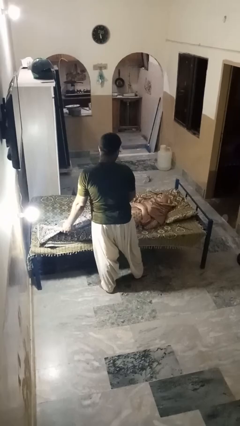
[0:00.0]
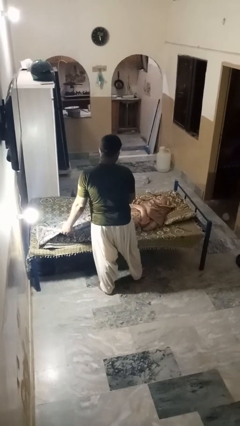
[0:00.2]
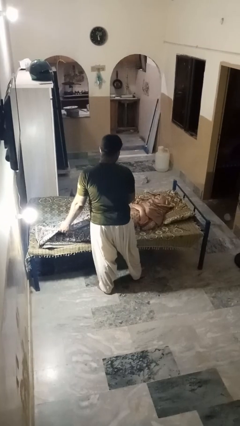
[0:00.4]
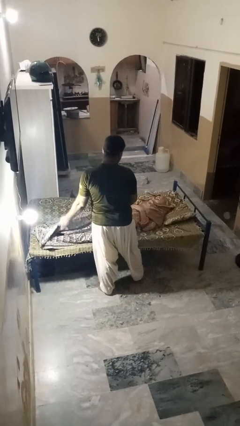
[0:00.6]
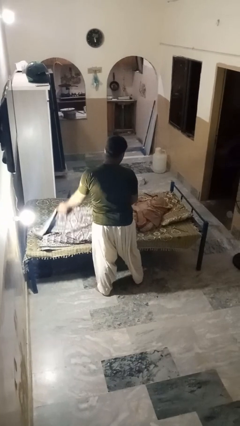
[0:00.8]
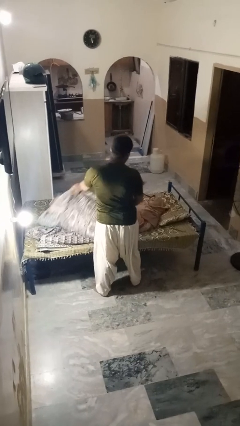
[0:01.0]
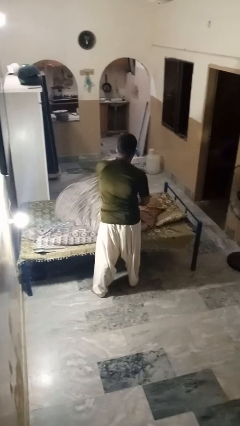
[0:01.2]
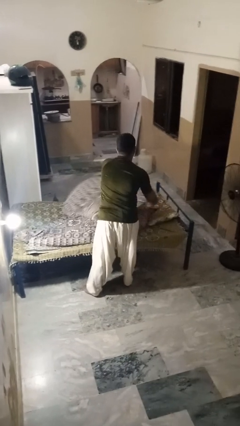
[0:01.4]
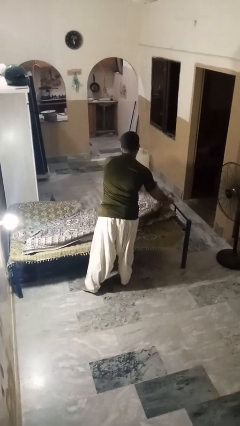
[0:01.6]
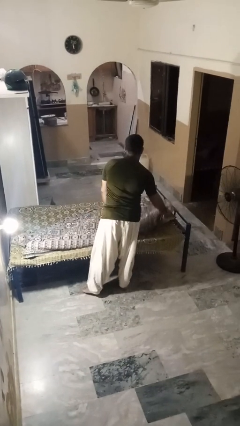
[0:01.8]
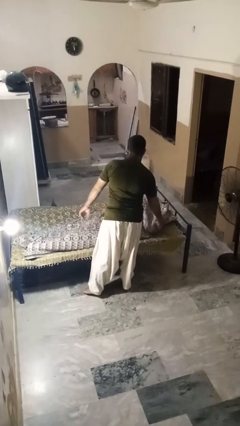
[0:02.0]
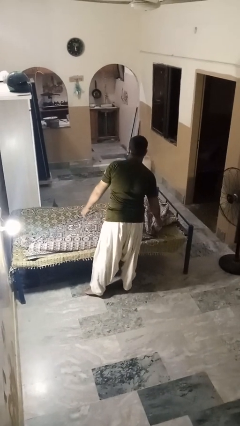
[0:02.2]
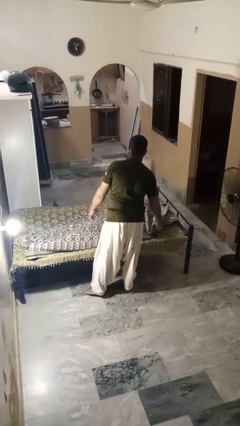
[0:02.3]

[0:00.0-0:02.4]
person covers friend with blanket

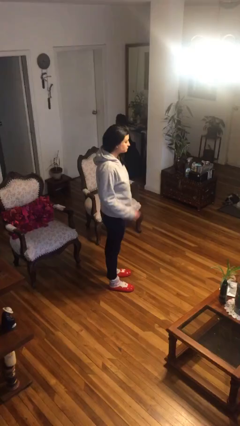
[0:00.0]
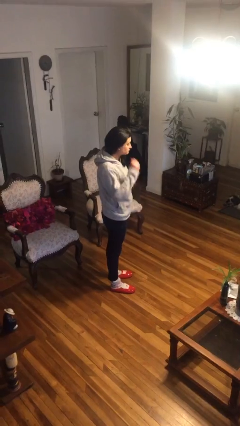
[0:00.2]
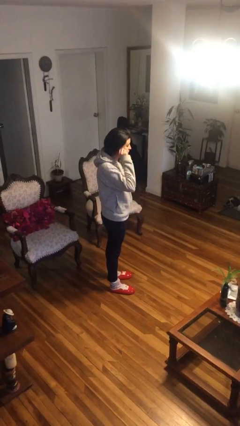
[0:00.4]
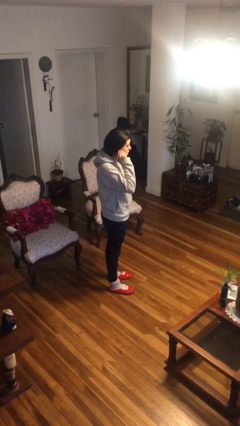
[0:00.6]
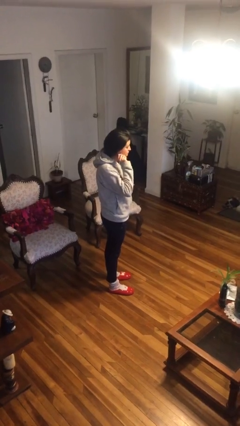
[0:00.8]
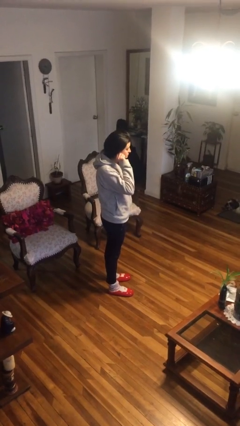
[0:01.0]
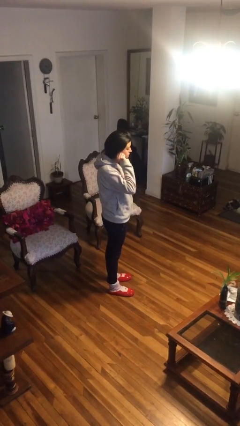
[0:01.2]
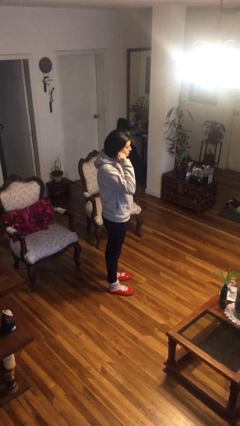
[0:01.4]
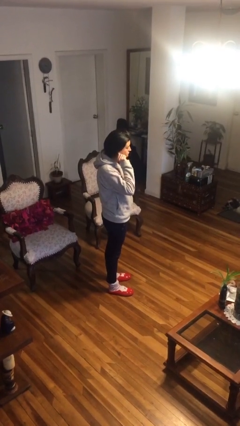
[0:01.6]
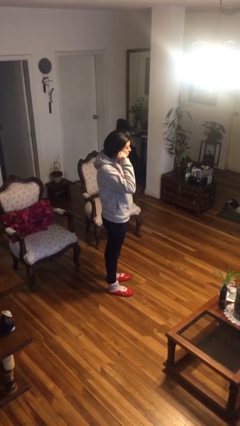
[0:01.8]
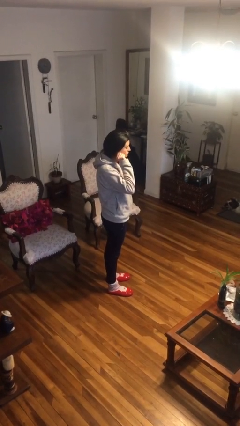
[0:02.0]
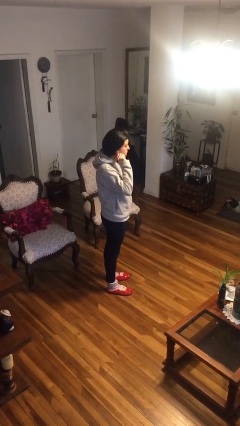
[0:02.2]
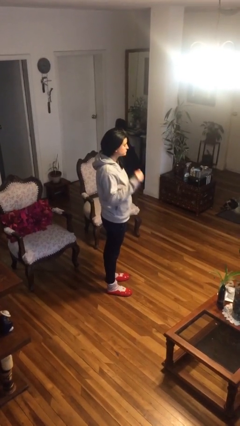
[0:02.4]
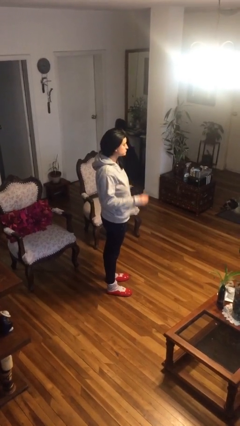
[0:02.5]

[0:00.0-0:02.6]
person touches earlobe

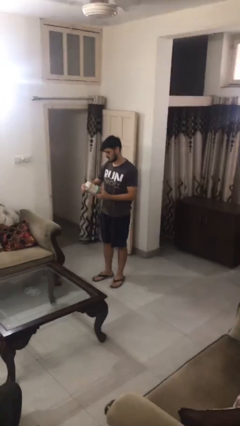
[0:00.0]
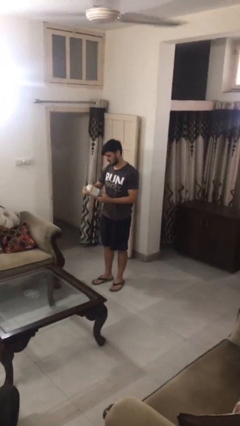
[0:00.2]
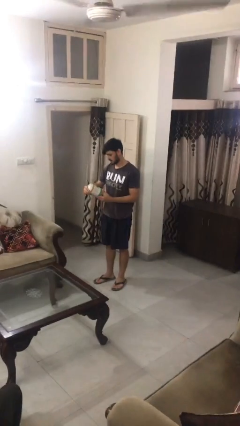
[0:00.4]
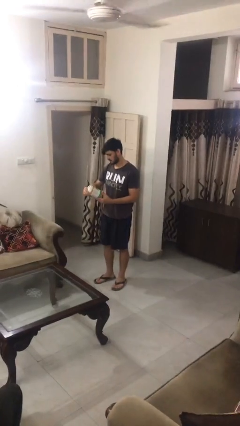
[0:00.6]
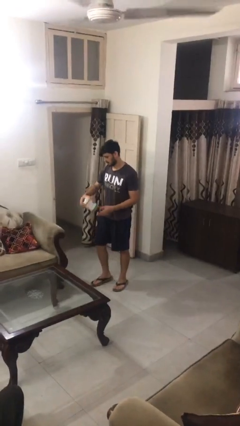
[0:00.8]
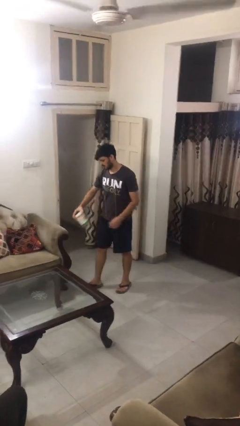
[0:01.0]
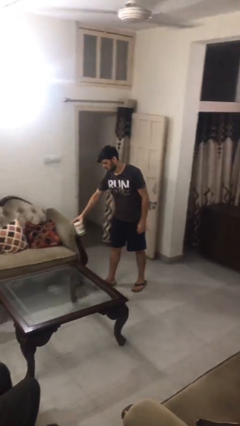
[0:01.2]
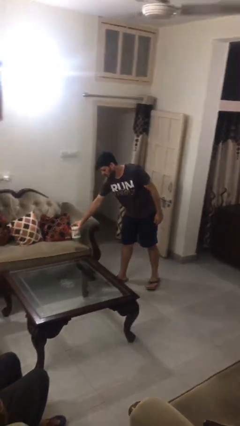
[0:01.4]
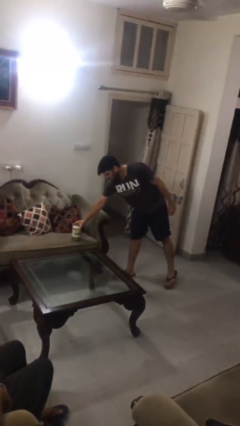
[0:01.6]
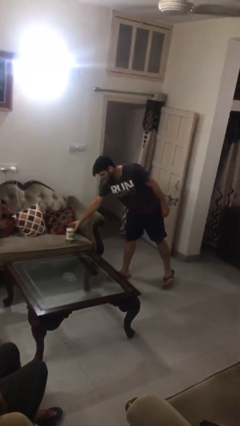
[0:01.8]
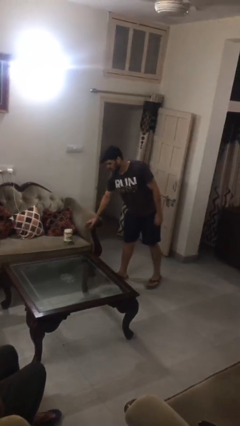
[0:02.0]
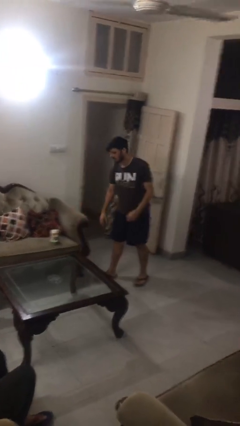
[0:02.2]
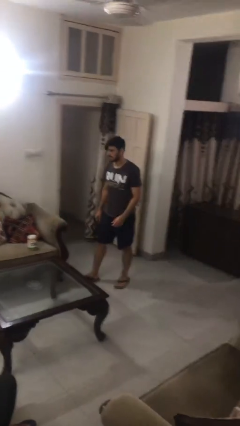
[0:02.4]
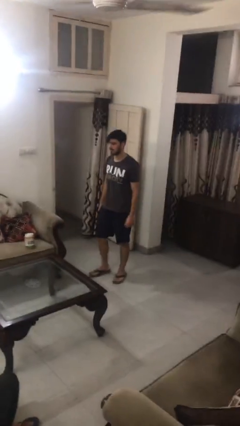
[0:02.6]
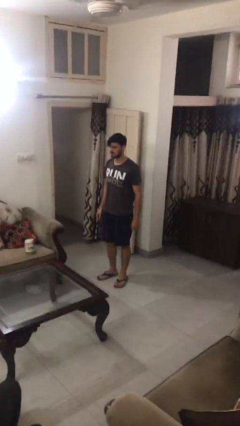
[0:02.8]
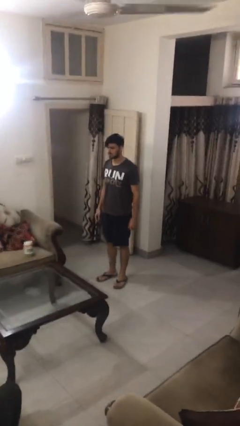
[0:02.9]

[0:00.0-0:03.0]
person puts down object on couch

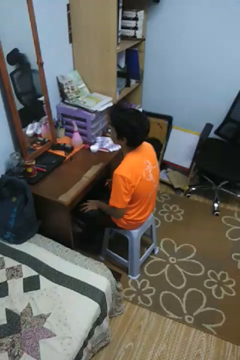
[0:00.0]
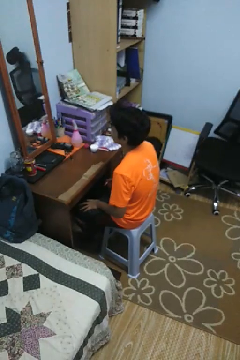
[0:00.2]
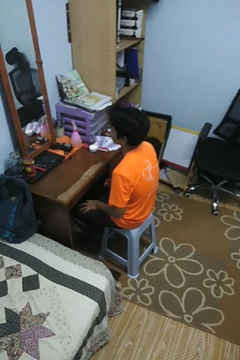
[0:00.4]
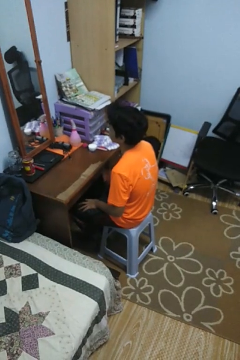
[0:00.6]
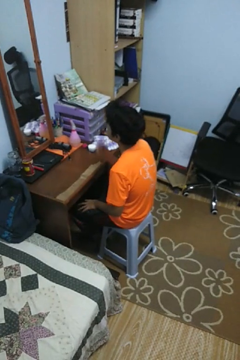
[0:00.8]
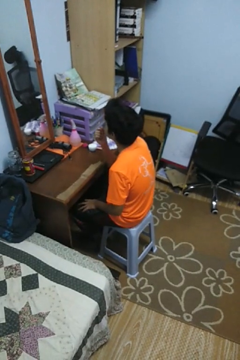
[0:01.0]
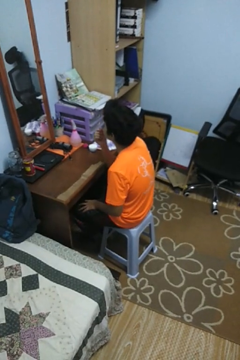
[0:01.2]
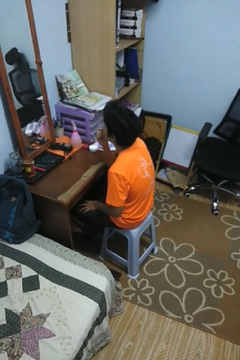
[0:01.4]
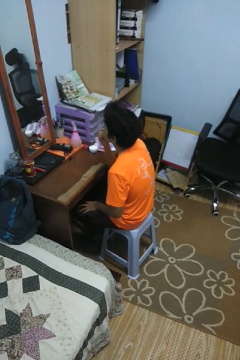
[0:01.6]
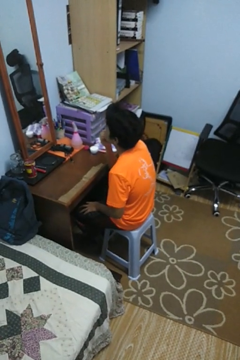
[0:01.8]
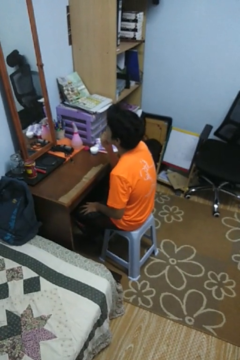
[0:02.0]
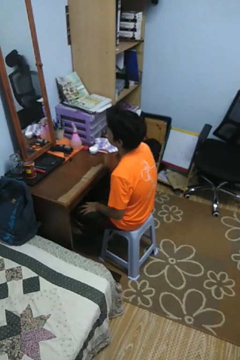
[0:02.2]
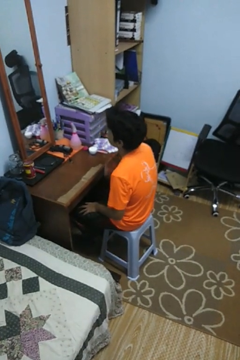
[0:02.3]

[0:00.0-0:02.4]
person applies lip makeup

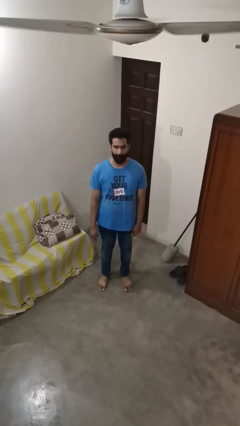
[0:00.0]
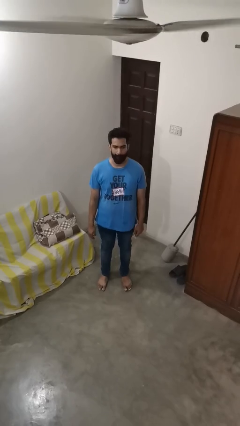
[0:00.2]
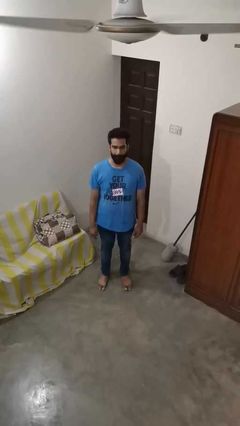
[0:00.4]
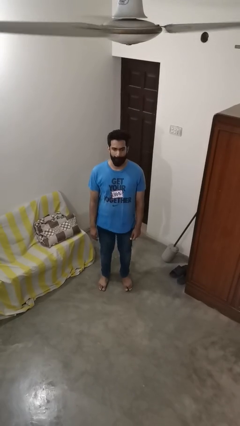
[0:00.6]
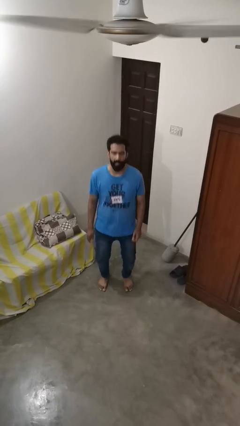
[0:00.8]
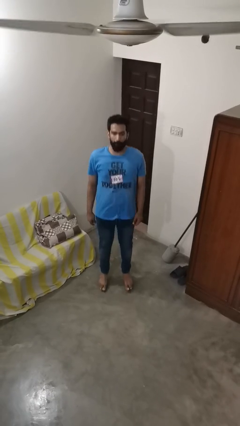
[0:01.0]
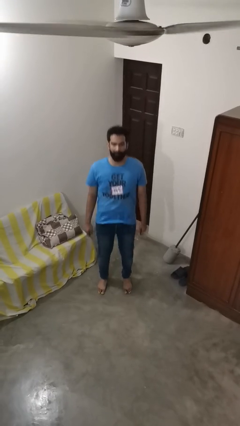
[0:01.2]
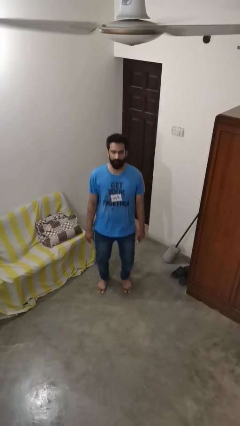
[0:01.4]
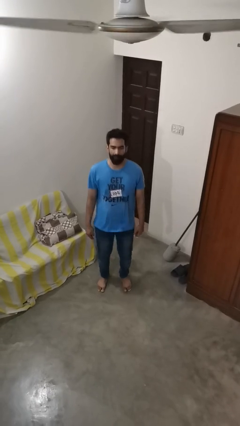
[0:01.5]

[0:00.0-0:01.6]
person jumps

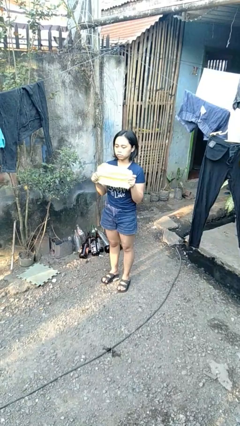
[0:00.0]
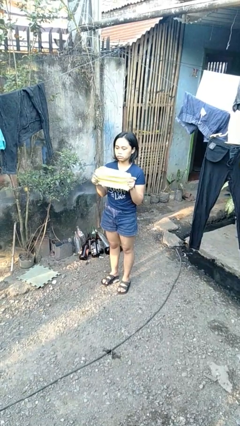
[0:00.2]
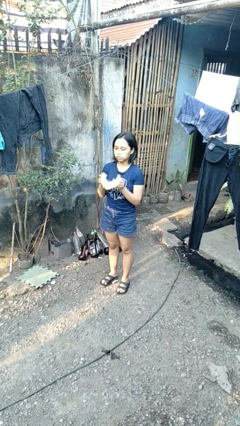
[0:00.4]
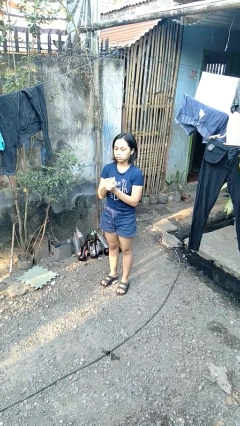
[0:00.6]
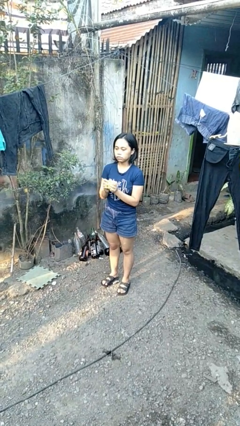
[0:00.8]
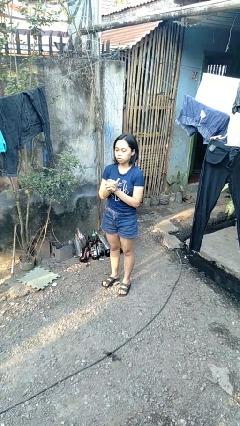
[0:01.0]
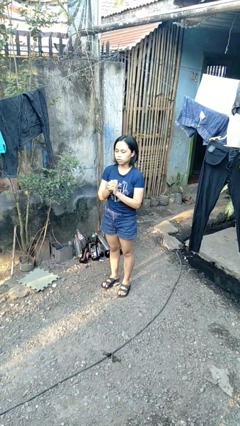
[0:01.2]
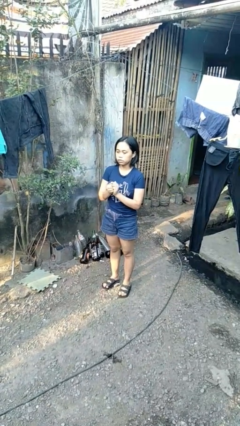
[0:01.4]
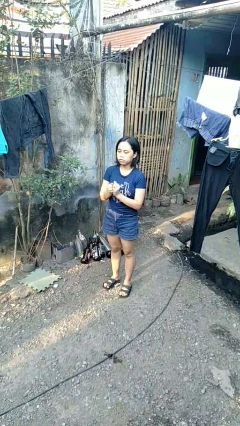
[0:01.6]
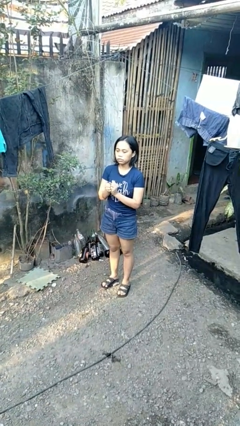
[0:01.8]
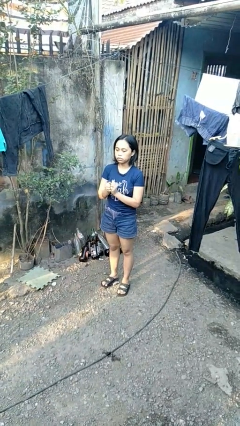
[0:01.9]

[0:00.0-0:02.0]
person crumples paper

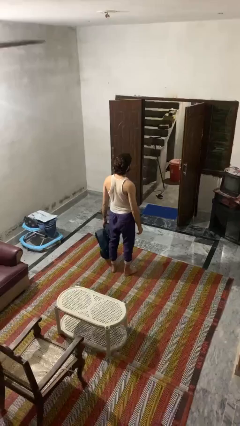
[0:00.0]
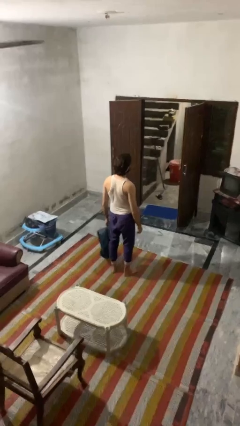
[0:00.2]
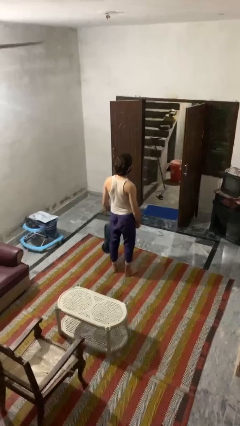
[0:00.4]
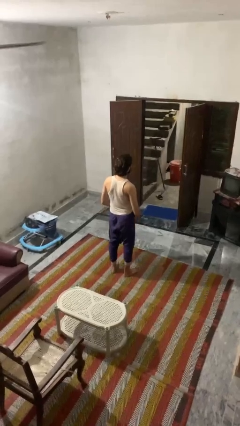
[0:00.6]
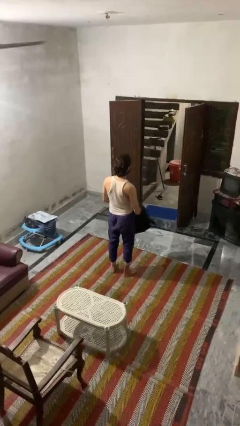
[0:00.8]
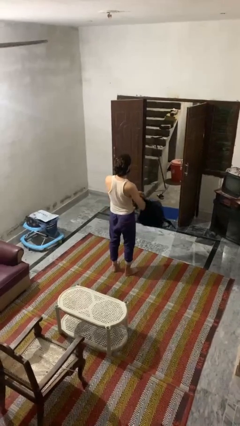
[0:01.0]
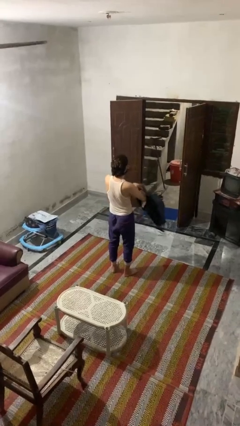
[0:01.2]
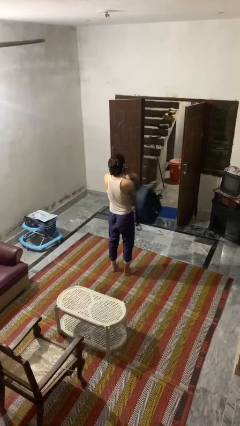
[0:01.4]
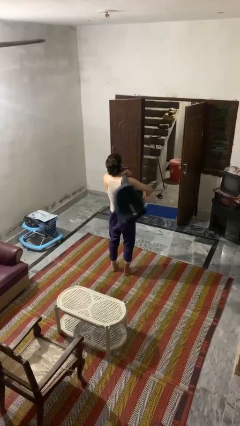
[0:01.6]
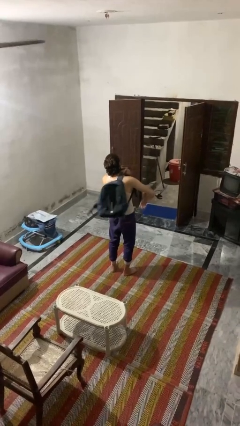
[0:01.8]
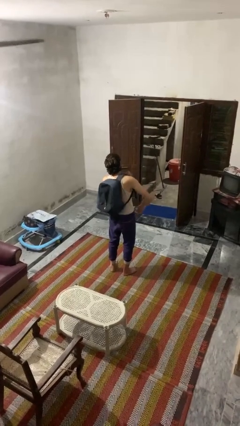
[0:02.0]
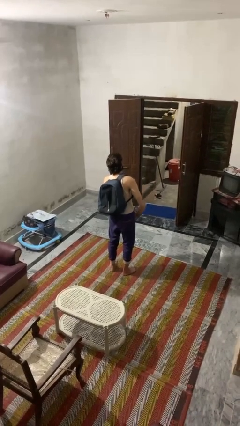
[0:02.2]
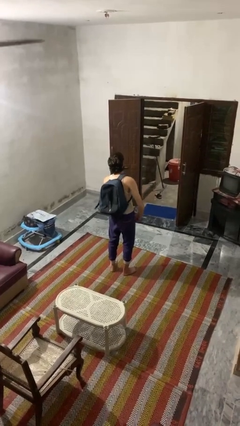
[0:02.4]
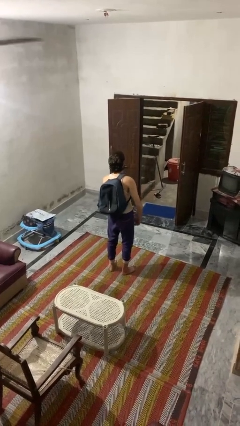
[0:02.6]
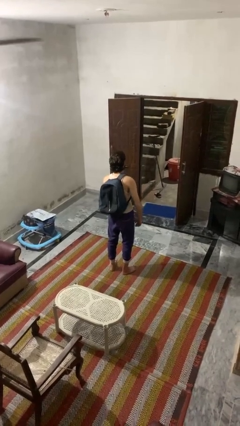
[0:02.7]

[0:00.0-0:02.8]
person puts on backpack

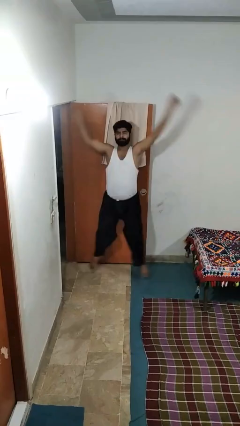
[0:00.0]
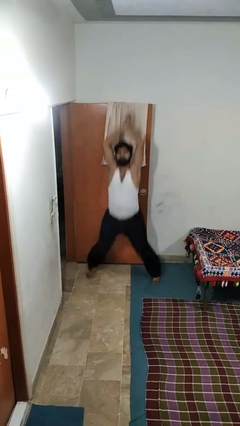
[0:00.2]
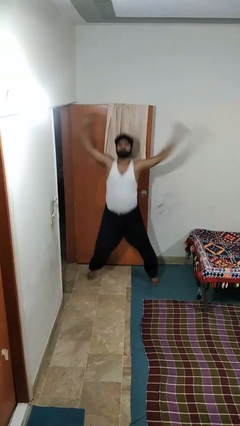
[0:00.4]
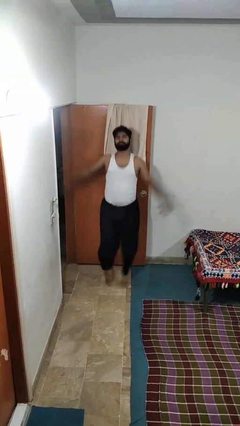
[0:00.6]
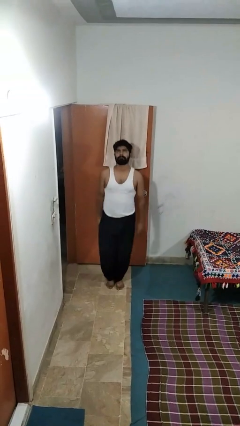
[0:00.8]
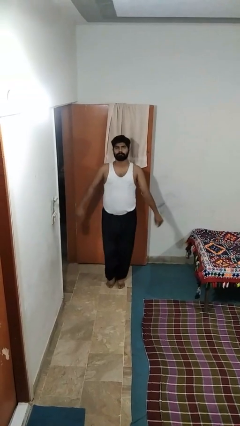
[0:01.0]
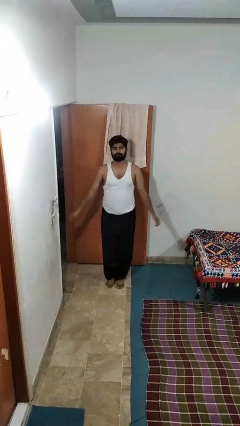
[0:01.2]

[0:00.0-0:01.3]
person exercises with jumping jacks
